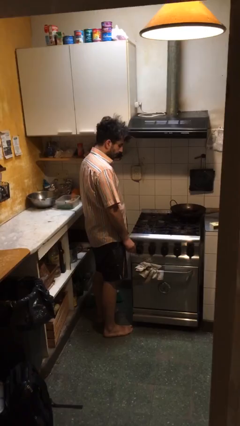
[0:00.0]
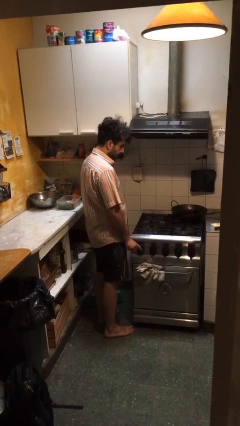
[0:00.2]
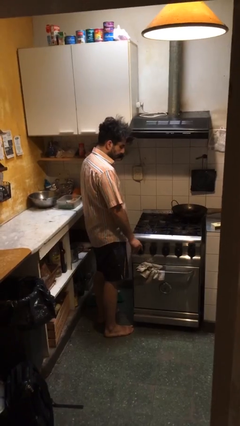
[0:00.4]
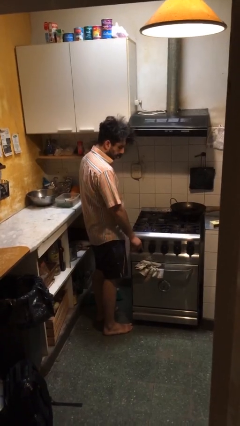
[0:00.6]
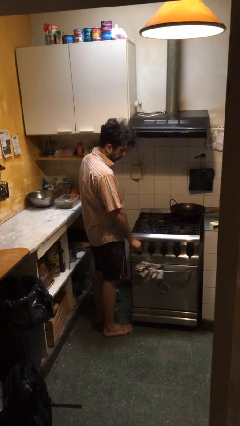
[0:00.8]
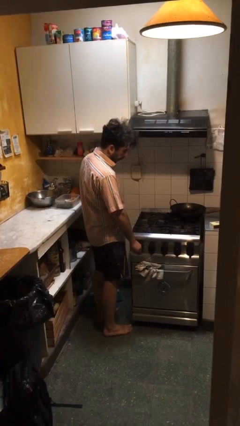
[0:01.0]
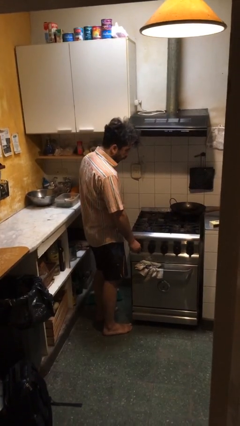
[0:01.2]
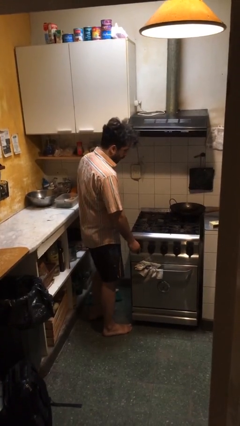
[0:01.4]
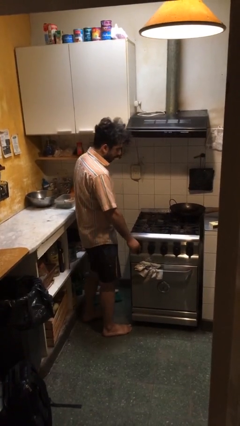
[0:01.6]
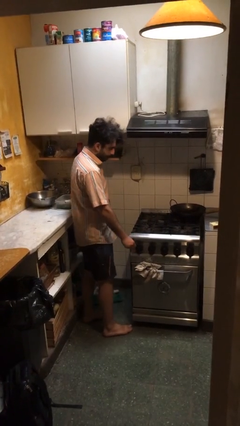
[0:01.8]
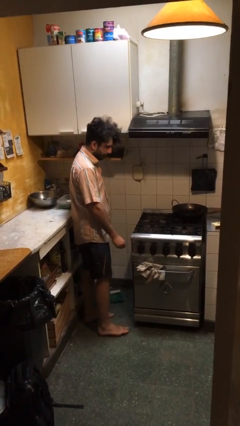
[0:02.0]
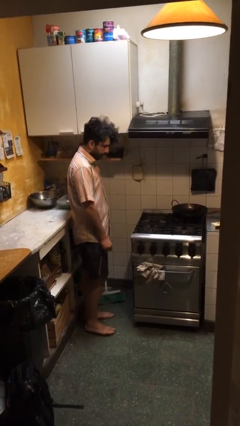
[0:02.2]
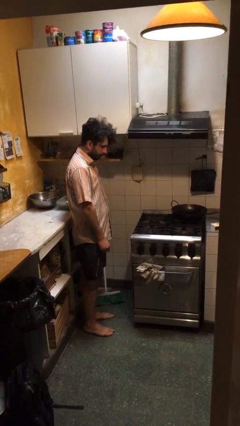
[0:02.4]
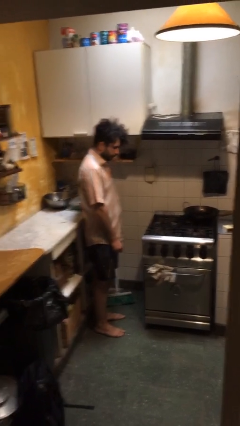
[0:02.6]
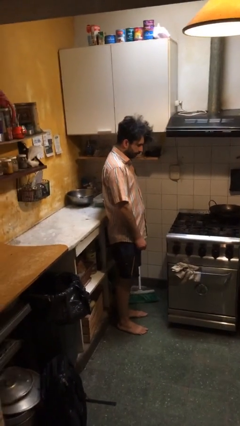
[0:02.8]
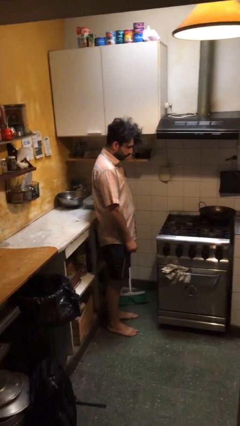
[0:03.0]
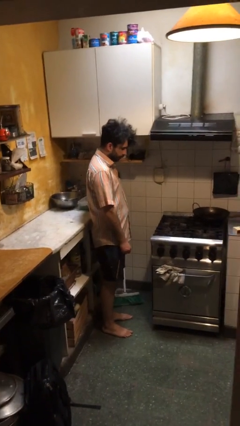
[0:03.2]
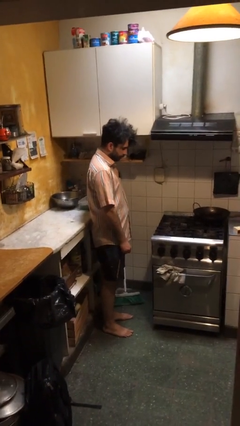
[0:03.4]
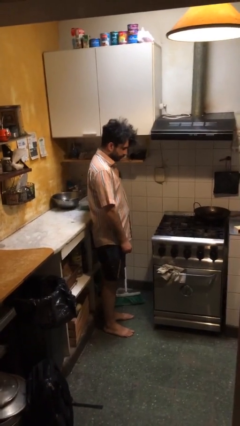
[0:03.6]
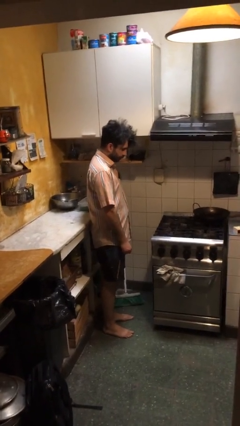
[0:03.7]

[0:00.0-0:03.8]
person turns off stovetop

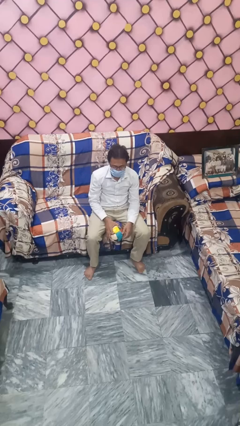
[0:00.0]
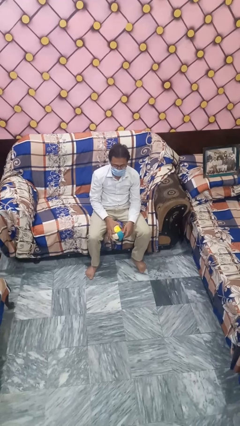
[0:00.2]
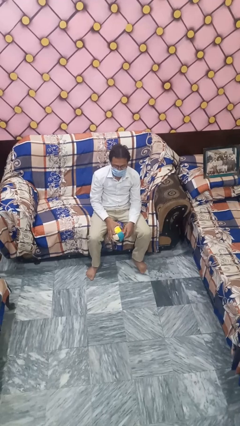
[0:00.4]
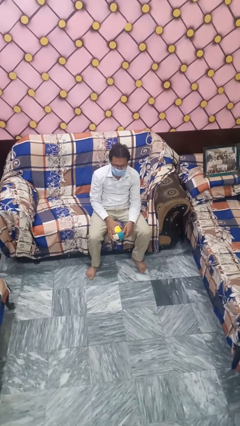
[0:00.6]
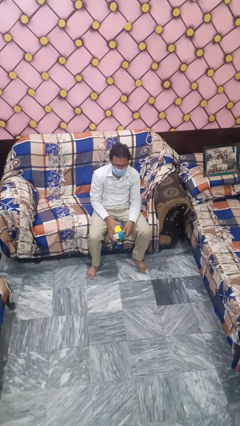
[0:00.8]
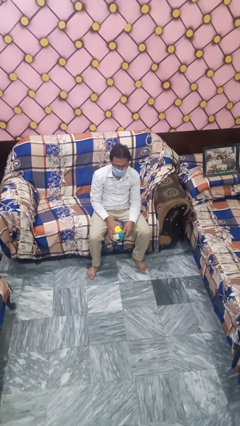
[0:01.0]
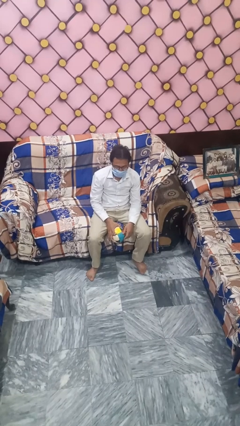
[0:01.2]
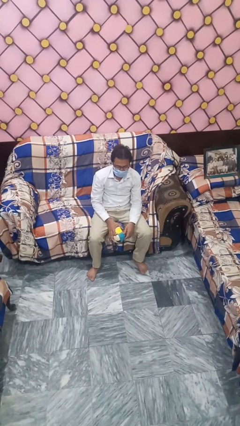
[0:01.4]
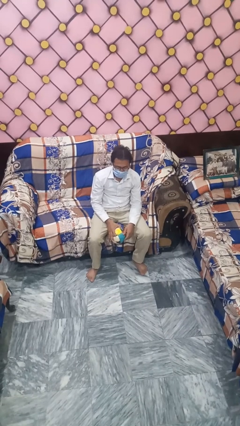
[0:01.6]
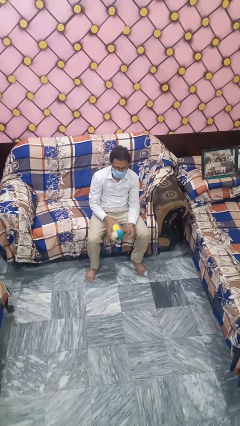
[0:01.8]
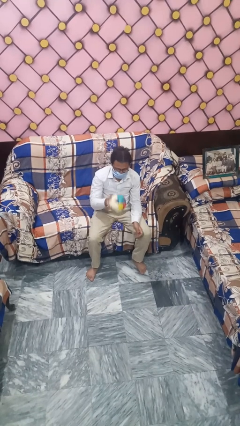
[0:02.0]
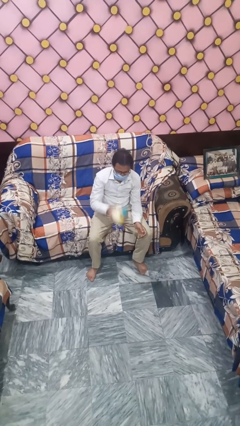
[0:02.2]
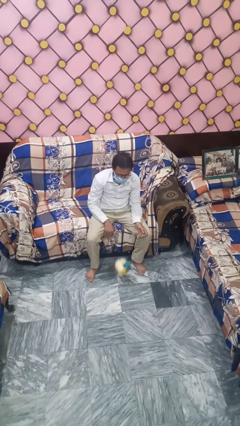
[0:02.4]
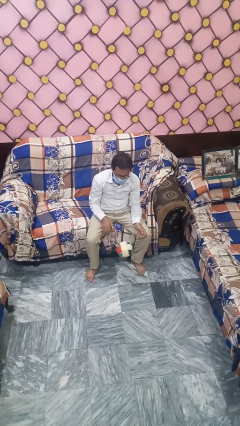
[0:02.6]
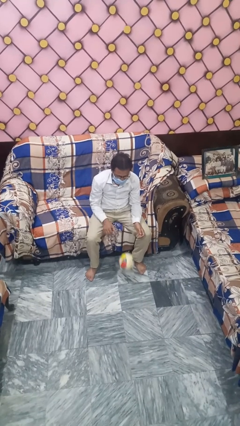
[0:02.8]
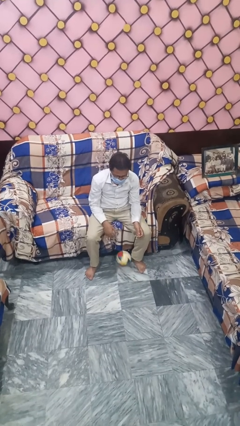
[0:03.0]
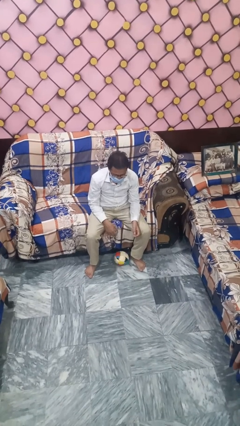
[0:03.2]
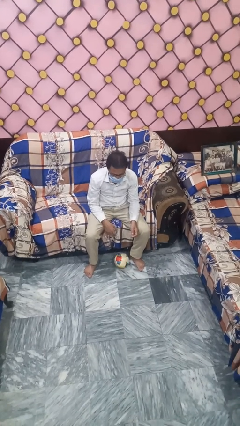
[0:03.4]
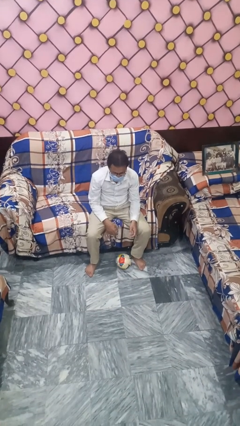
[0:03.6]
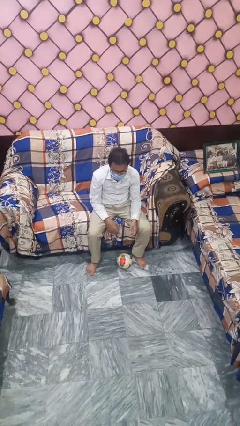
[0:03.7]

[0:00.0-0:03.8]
person bounces ball on floor

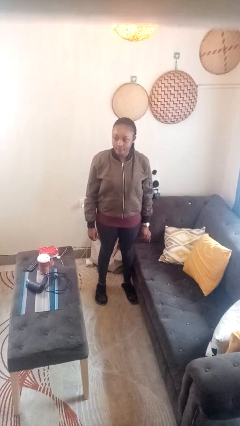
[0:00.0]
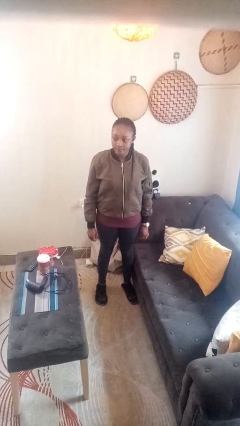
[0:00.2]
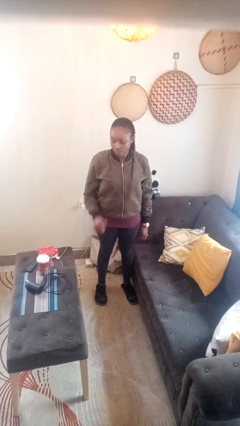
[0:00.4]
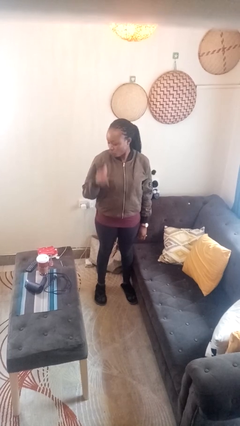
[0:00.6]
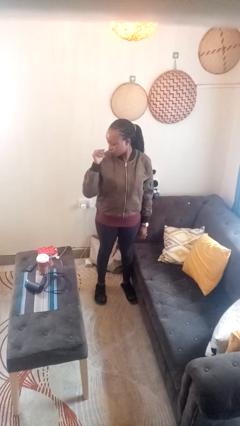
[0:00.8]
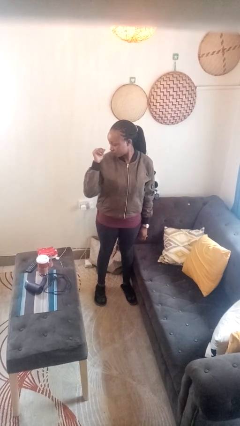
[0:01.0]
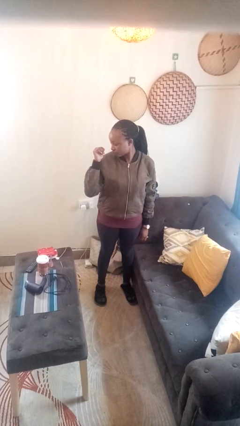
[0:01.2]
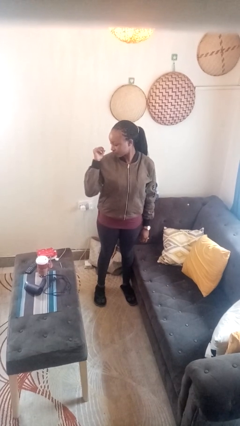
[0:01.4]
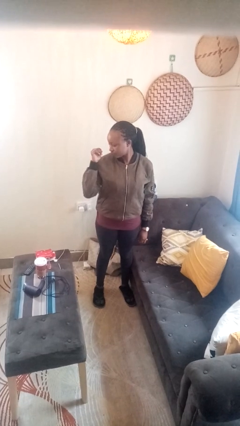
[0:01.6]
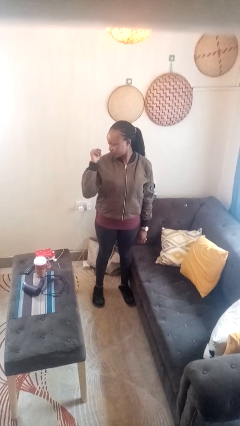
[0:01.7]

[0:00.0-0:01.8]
person gestures behind me

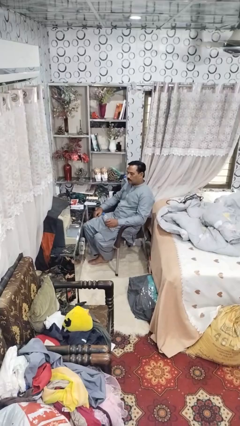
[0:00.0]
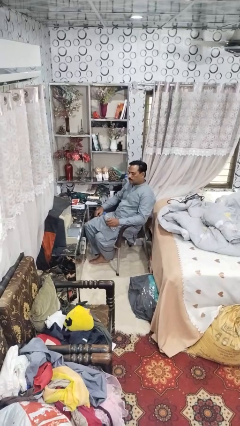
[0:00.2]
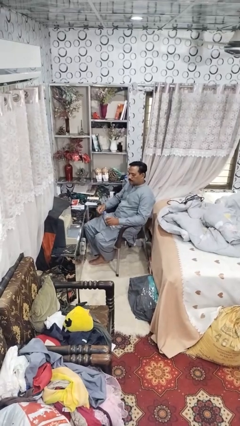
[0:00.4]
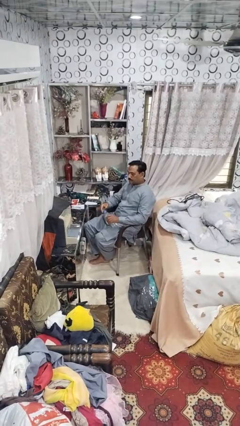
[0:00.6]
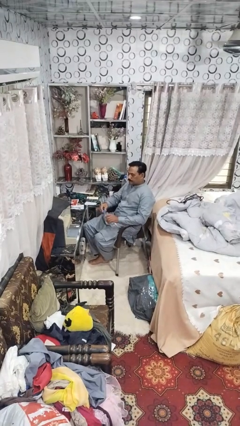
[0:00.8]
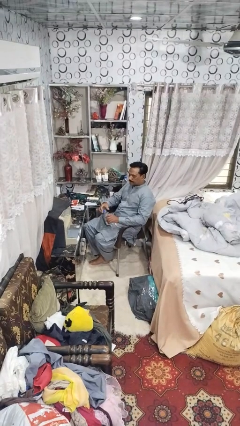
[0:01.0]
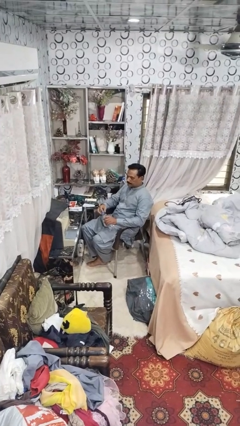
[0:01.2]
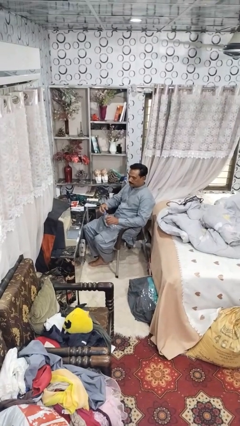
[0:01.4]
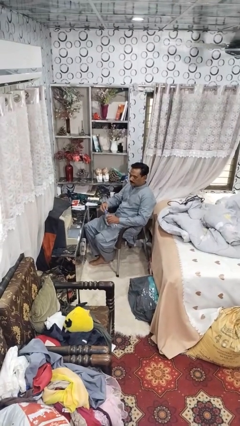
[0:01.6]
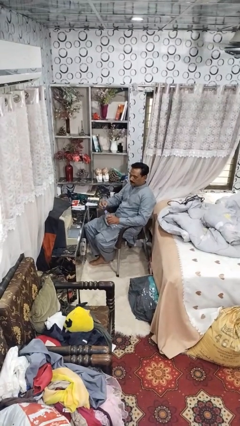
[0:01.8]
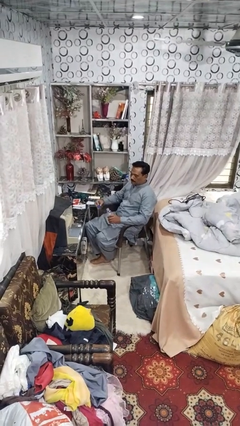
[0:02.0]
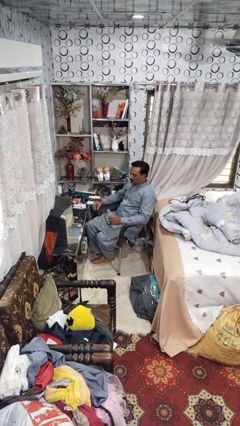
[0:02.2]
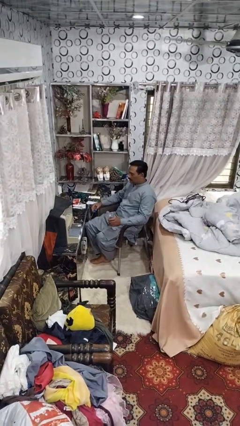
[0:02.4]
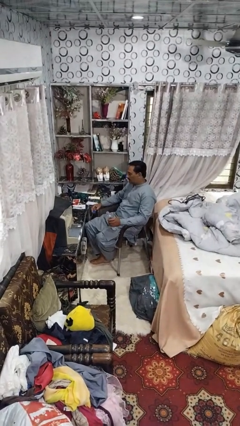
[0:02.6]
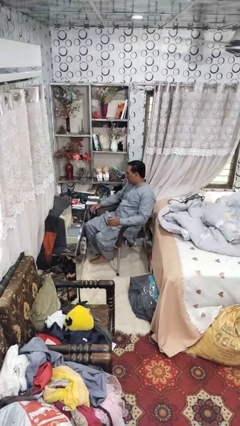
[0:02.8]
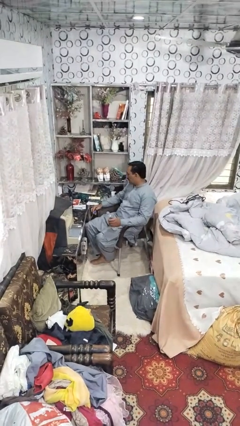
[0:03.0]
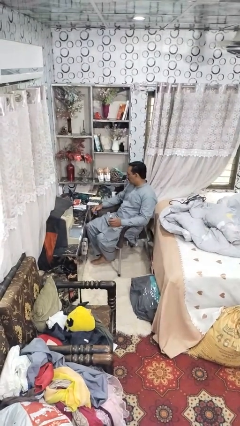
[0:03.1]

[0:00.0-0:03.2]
person unscrews lid from bottle

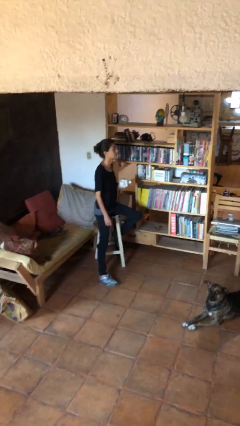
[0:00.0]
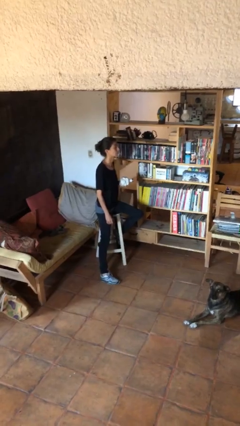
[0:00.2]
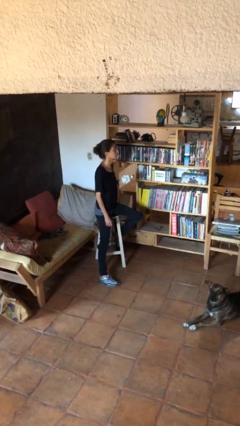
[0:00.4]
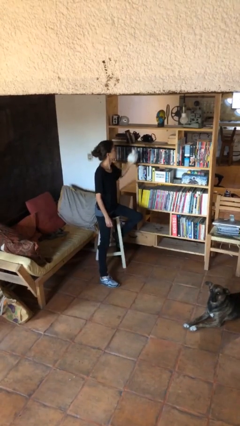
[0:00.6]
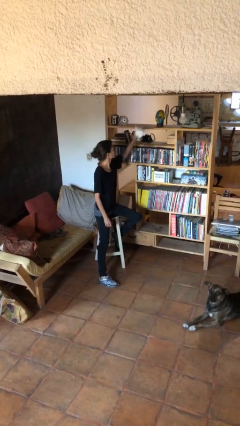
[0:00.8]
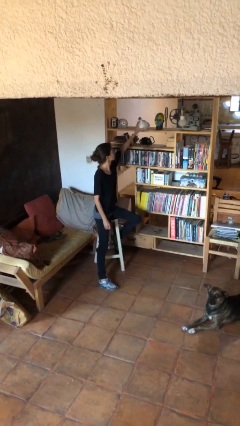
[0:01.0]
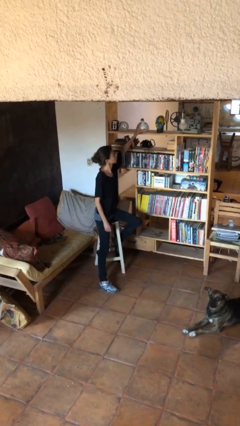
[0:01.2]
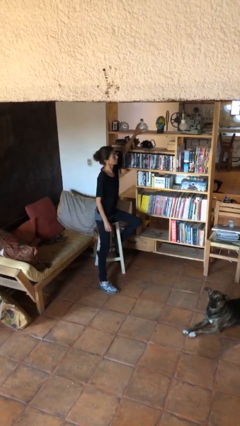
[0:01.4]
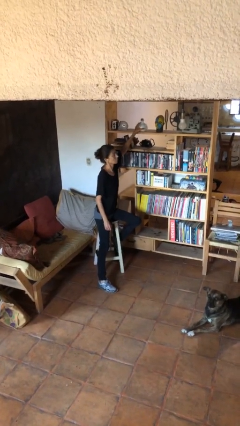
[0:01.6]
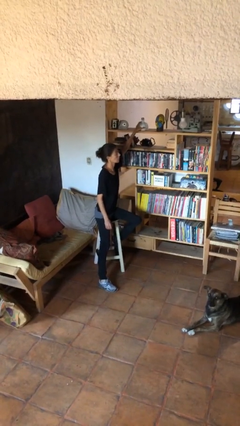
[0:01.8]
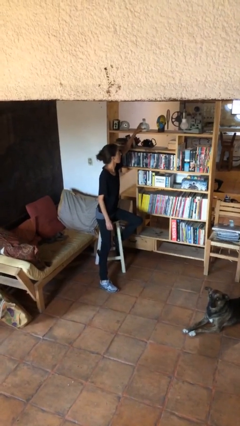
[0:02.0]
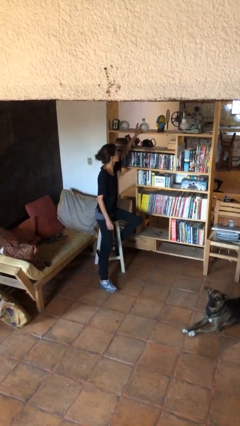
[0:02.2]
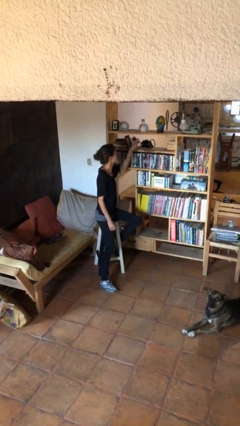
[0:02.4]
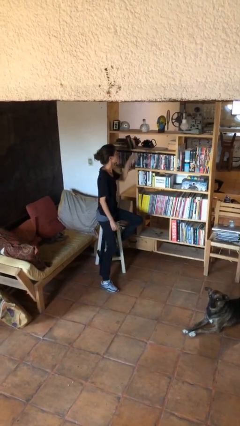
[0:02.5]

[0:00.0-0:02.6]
person puts down object on countertop

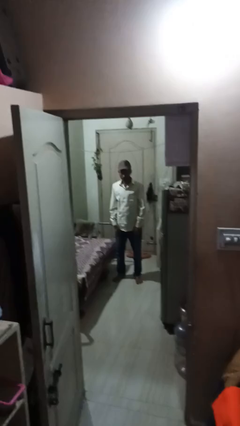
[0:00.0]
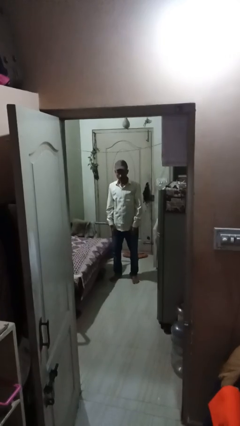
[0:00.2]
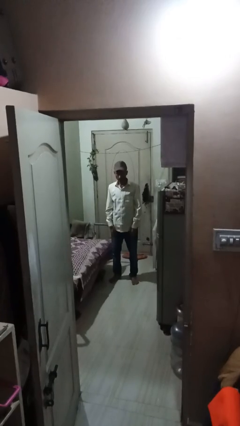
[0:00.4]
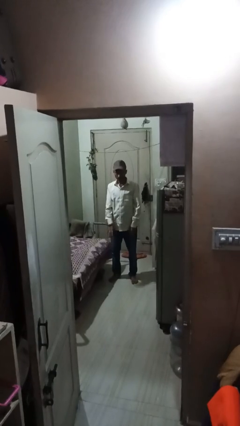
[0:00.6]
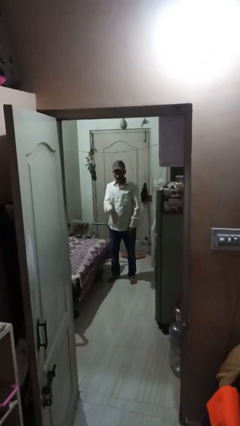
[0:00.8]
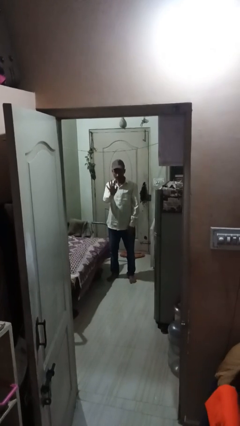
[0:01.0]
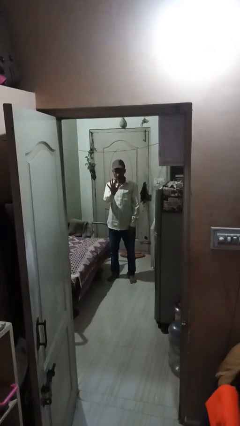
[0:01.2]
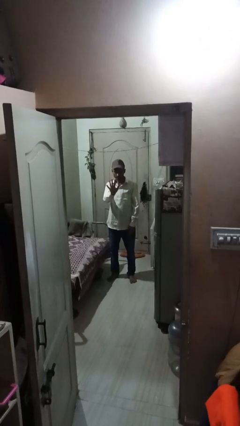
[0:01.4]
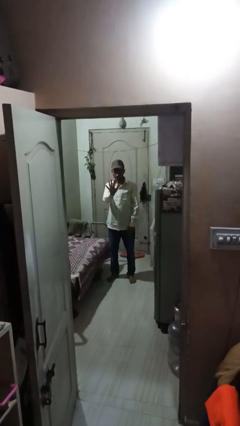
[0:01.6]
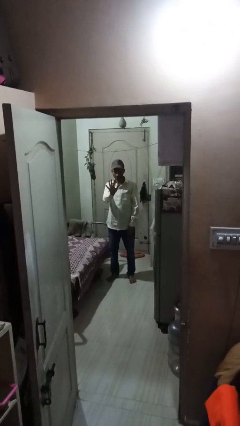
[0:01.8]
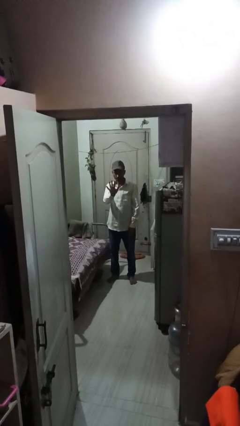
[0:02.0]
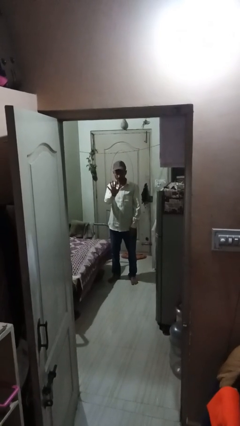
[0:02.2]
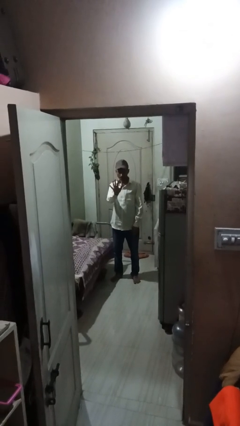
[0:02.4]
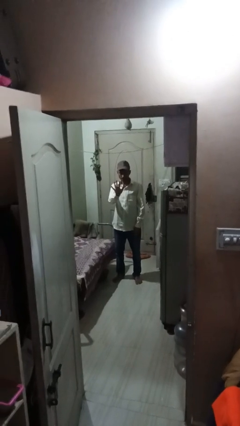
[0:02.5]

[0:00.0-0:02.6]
person gestures number five
